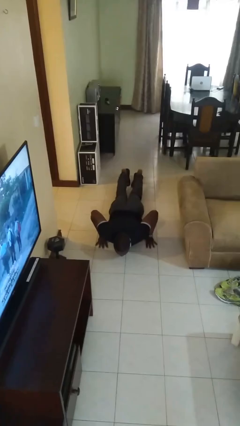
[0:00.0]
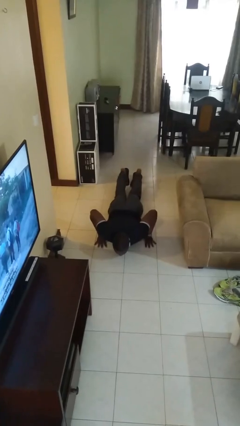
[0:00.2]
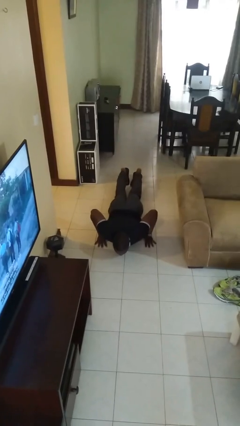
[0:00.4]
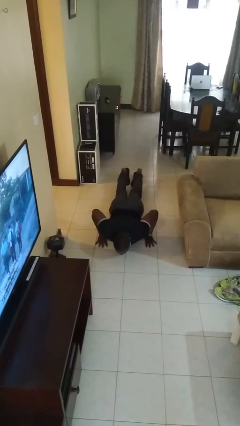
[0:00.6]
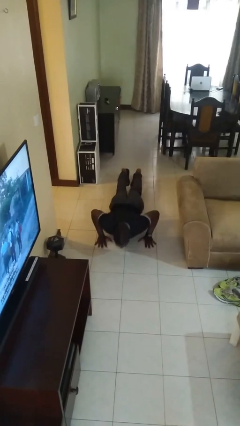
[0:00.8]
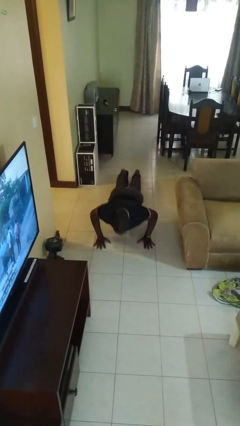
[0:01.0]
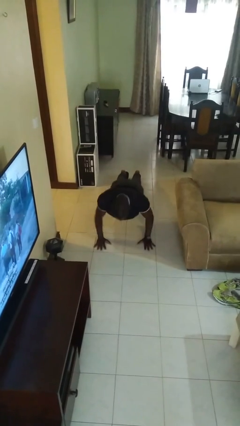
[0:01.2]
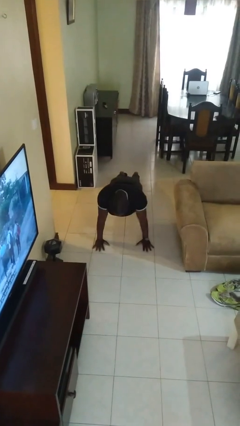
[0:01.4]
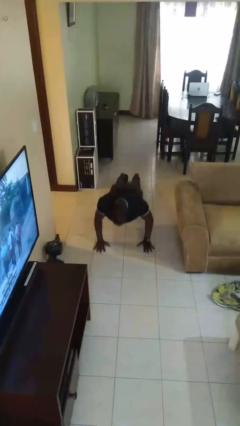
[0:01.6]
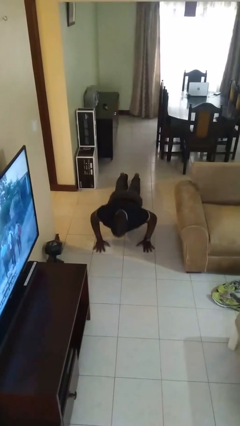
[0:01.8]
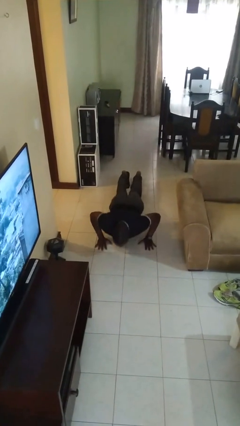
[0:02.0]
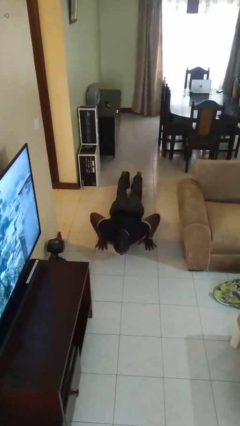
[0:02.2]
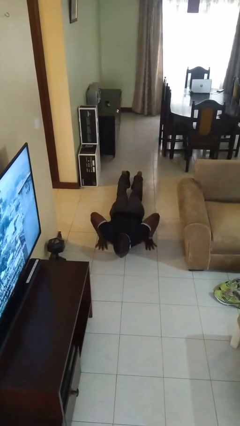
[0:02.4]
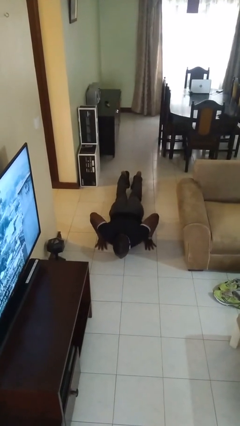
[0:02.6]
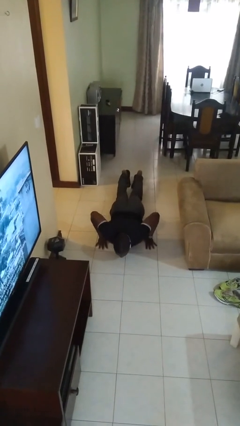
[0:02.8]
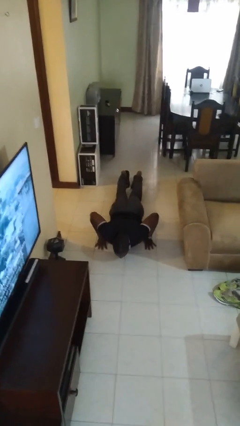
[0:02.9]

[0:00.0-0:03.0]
person exercises with pushup

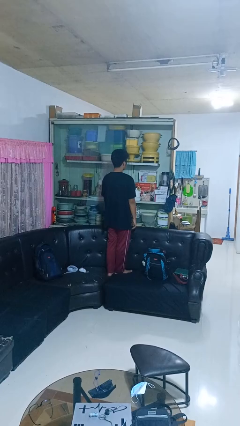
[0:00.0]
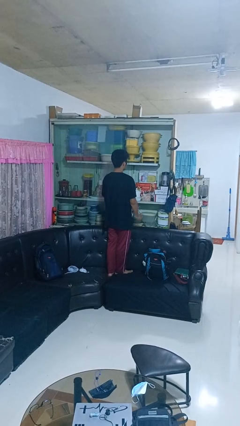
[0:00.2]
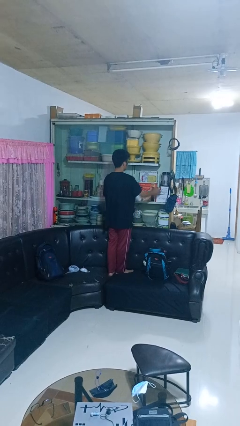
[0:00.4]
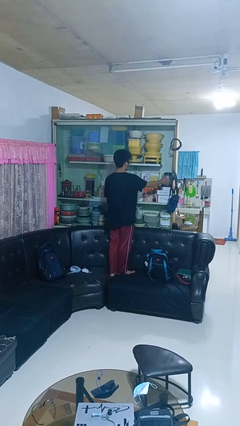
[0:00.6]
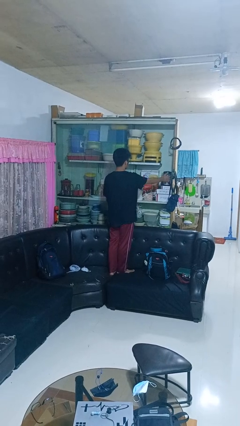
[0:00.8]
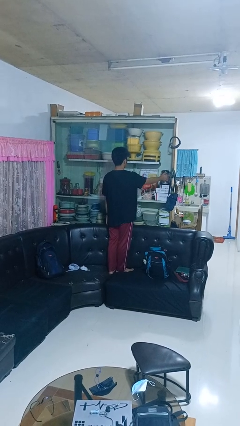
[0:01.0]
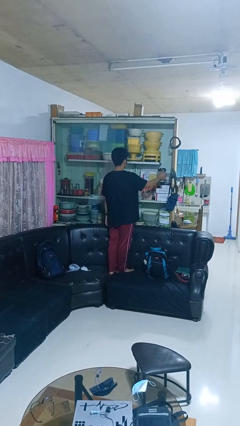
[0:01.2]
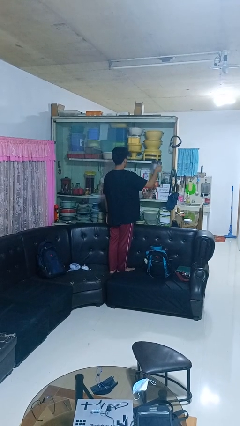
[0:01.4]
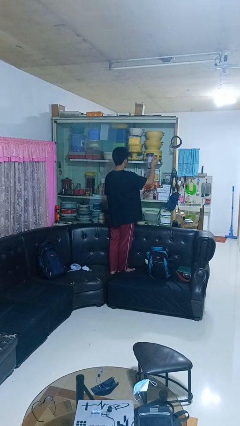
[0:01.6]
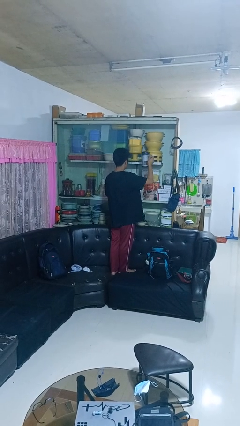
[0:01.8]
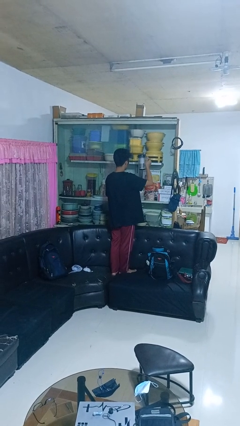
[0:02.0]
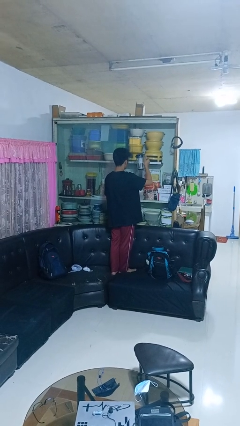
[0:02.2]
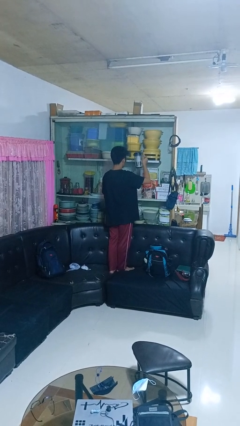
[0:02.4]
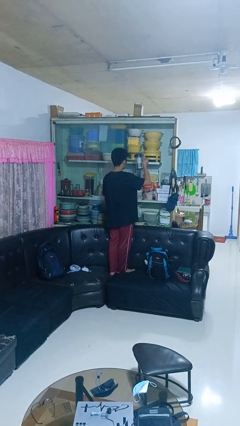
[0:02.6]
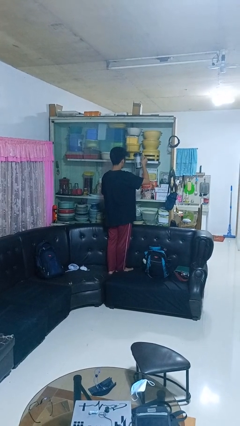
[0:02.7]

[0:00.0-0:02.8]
person picks up object from cabinet

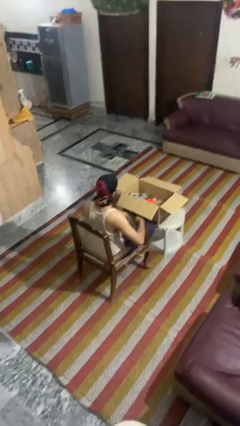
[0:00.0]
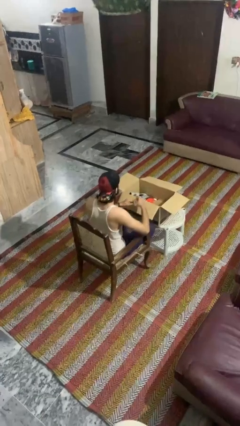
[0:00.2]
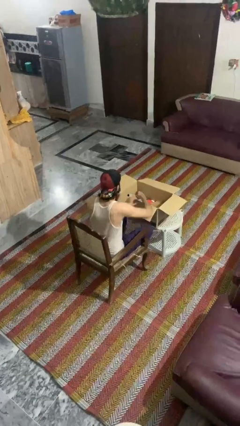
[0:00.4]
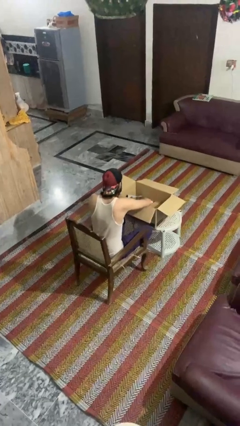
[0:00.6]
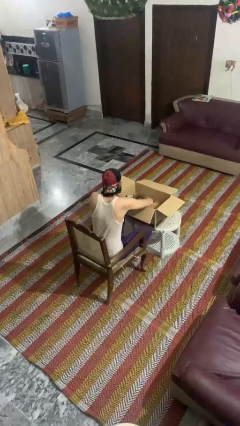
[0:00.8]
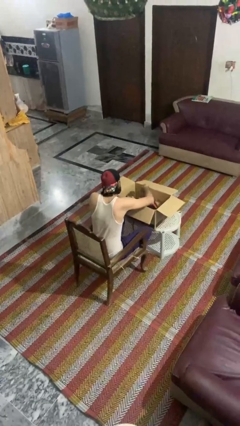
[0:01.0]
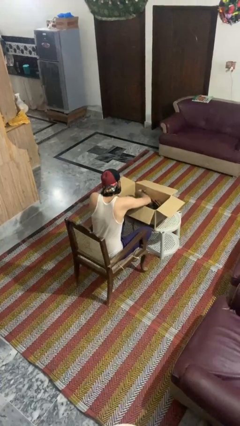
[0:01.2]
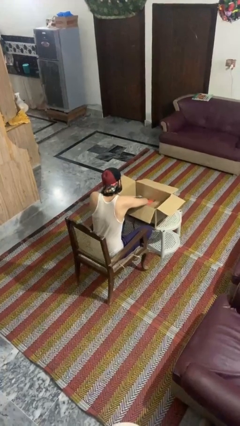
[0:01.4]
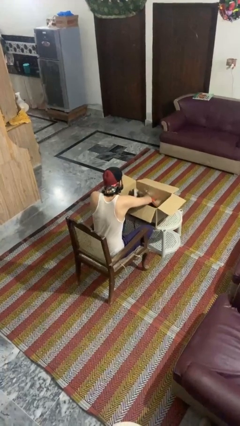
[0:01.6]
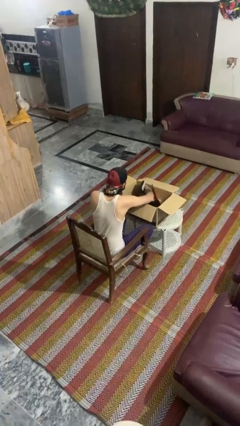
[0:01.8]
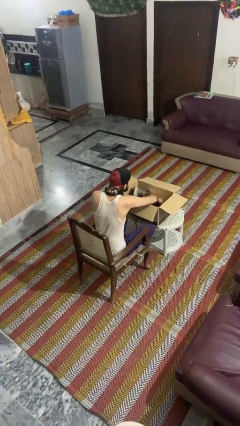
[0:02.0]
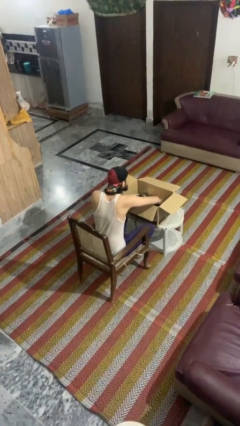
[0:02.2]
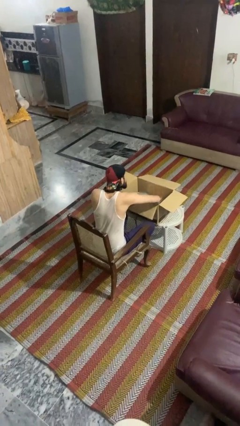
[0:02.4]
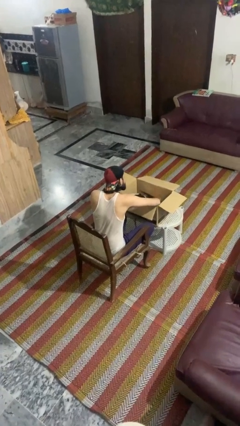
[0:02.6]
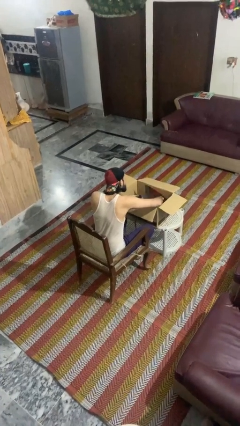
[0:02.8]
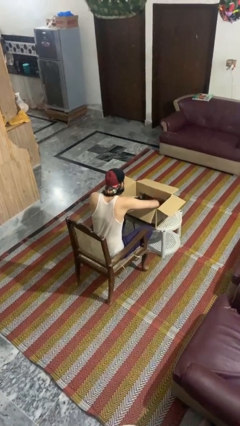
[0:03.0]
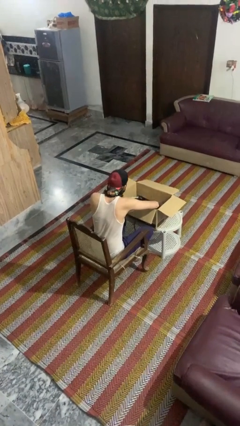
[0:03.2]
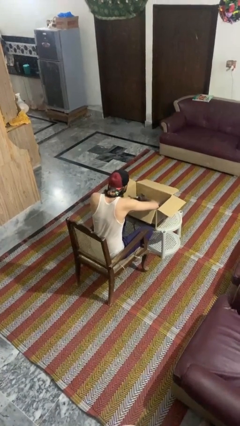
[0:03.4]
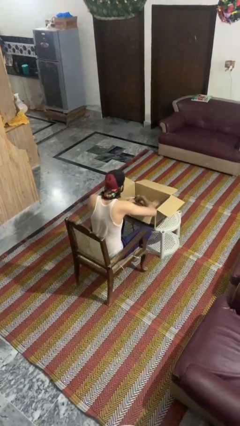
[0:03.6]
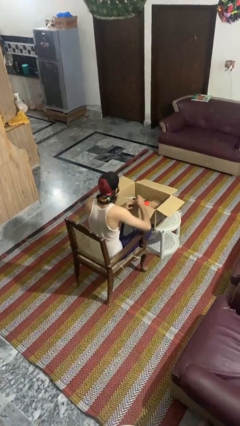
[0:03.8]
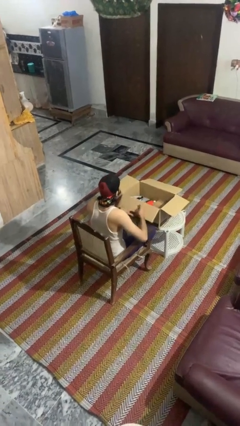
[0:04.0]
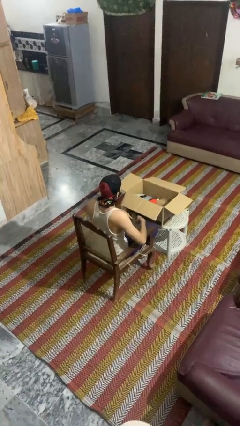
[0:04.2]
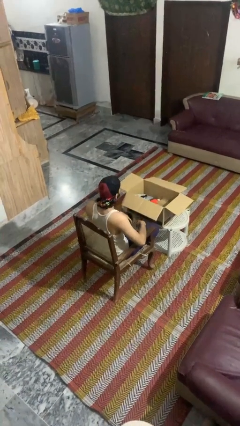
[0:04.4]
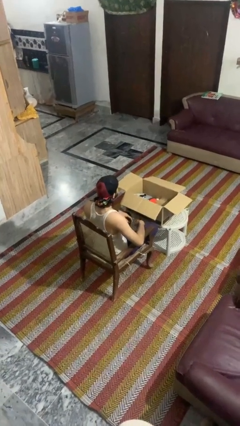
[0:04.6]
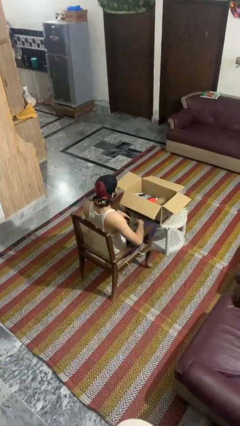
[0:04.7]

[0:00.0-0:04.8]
person searches in box

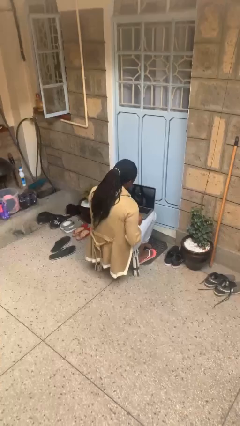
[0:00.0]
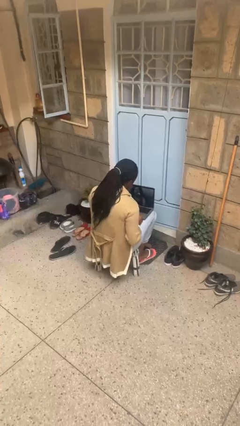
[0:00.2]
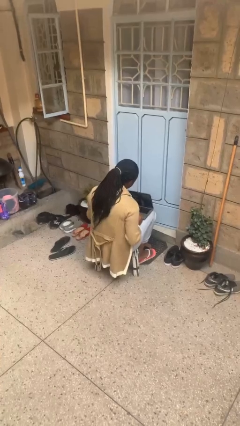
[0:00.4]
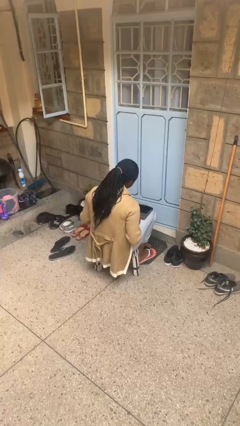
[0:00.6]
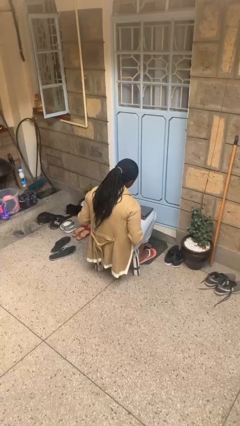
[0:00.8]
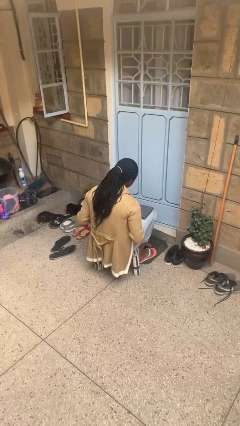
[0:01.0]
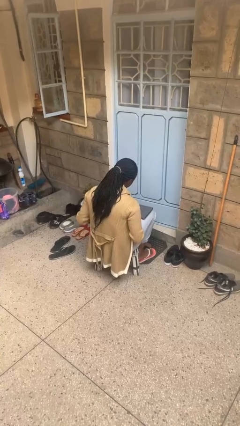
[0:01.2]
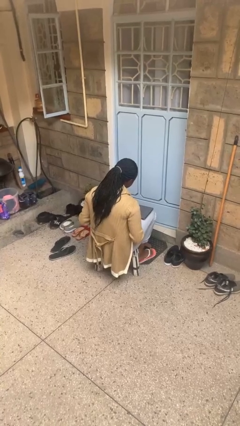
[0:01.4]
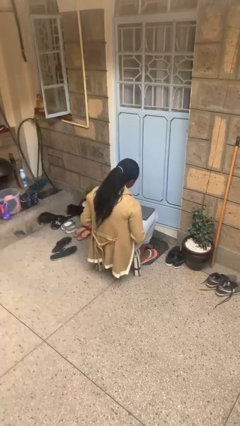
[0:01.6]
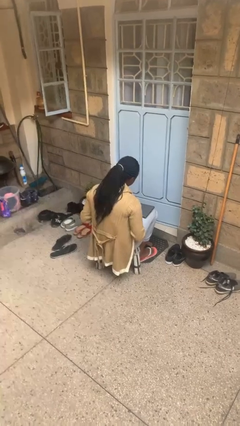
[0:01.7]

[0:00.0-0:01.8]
person closes laptop

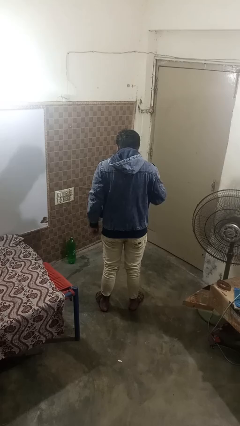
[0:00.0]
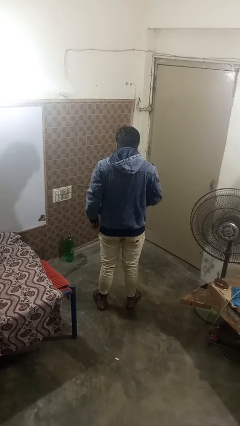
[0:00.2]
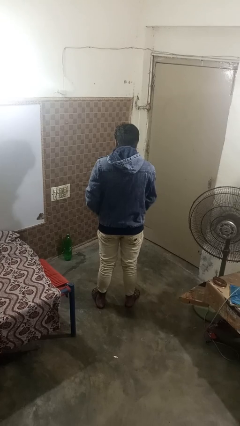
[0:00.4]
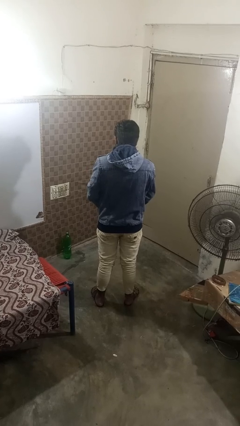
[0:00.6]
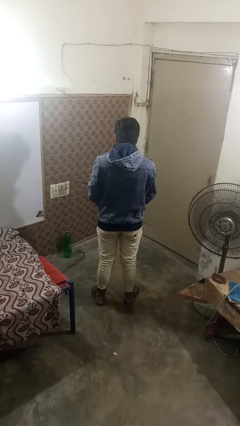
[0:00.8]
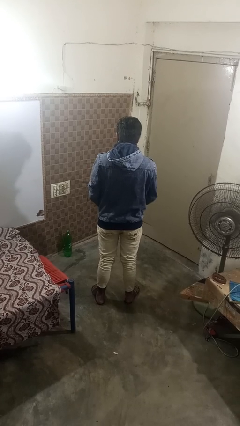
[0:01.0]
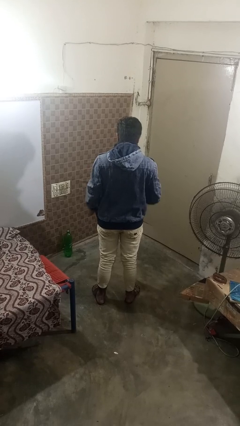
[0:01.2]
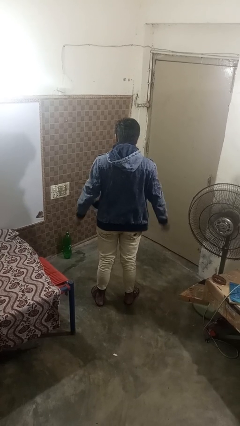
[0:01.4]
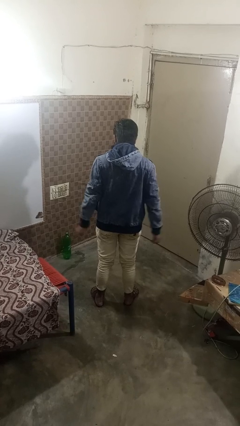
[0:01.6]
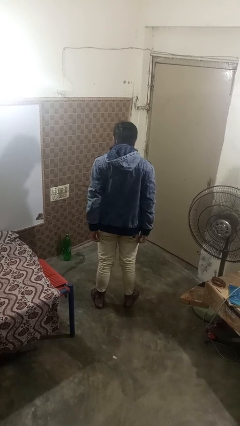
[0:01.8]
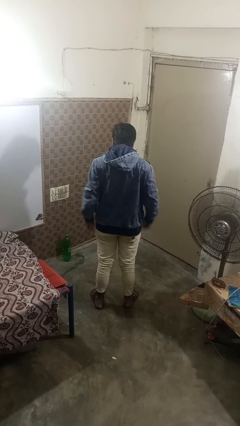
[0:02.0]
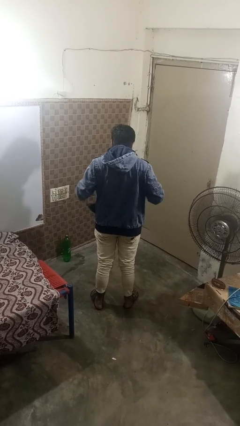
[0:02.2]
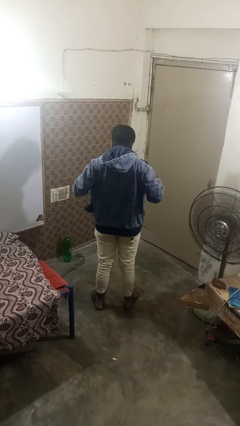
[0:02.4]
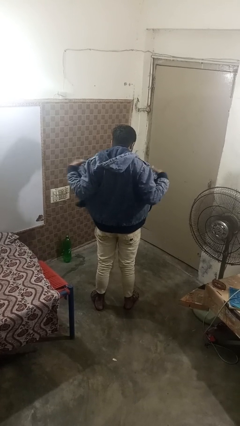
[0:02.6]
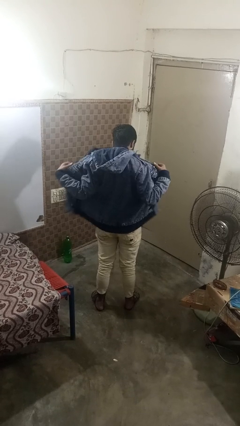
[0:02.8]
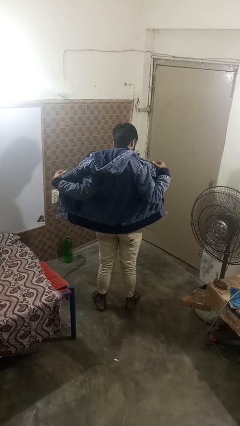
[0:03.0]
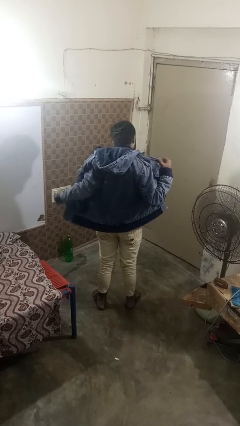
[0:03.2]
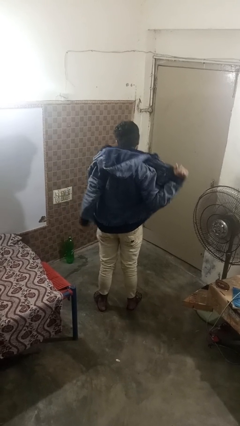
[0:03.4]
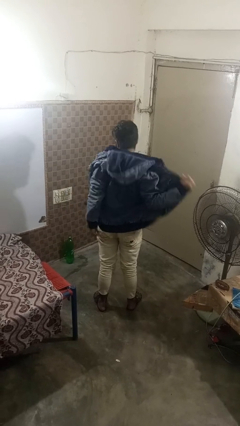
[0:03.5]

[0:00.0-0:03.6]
person unzips jacket

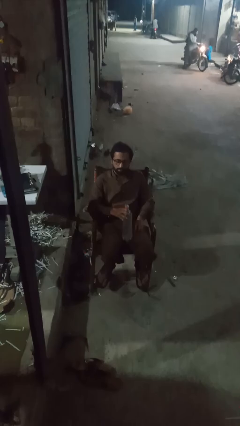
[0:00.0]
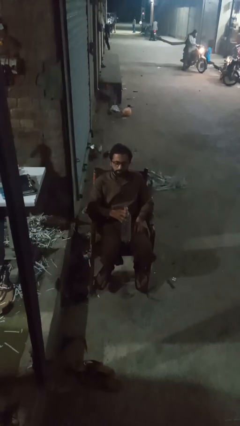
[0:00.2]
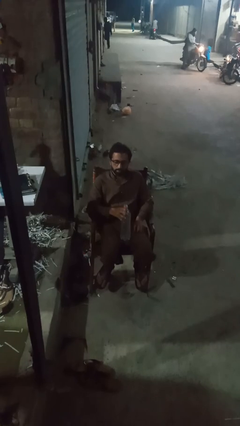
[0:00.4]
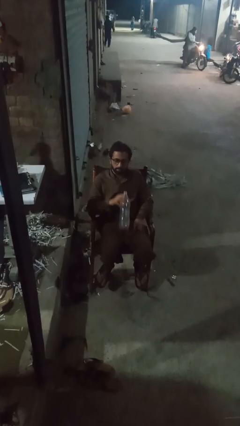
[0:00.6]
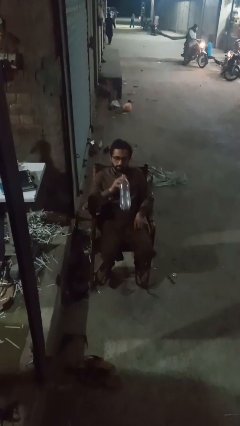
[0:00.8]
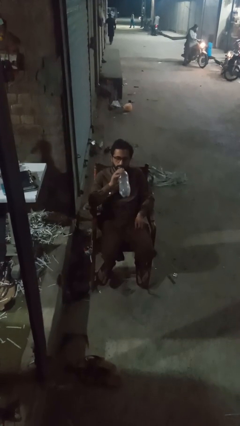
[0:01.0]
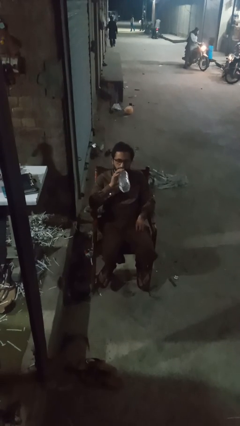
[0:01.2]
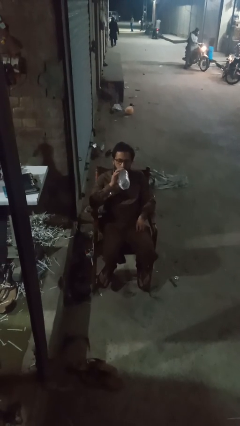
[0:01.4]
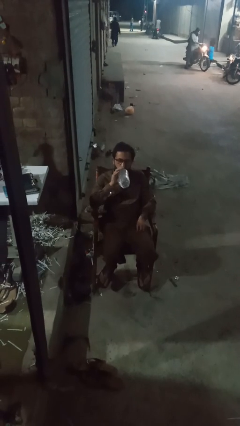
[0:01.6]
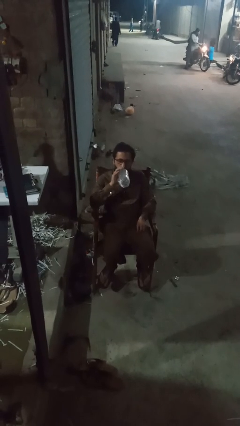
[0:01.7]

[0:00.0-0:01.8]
person drinks from bottle
